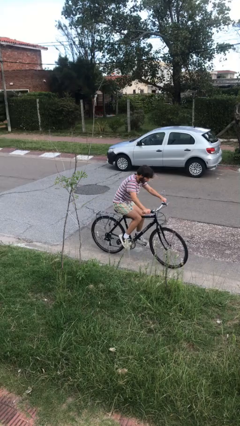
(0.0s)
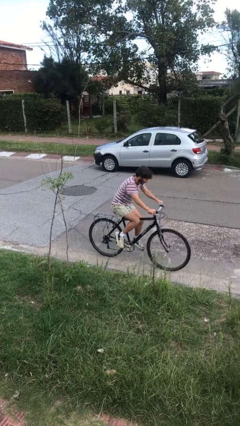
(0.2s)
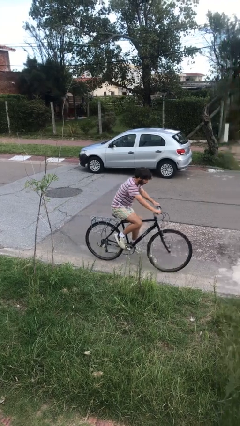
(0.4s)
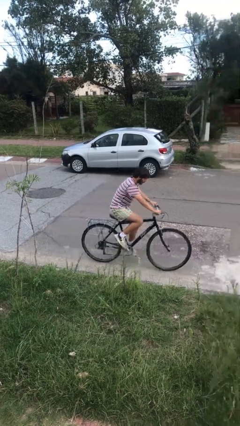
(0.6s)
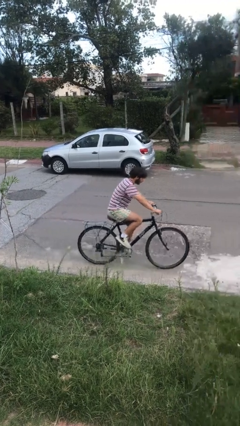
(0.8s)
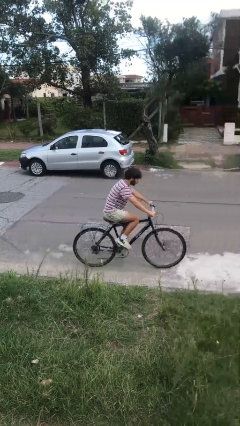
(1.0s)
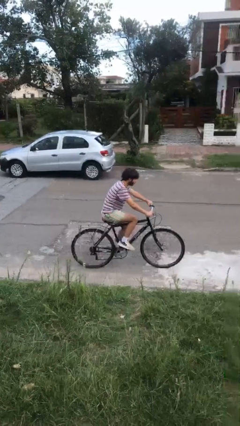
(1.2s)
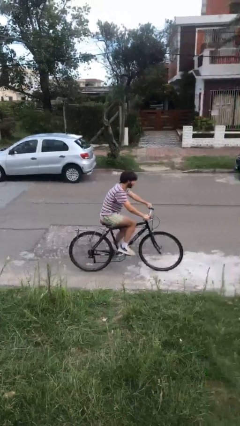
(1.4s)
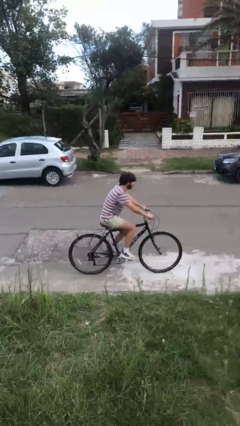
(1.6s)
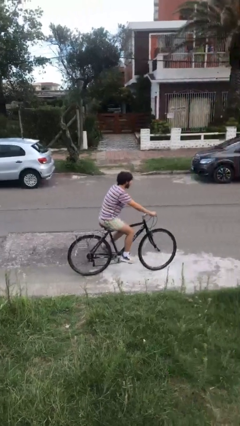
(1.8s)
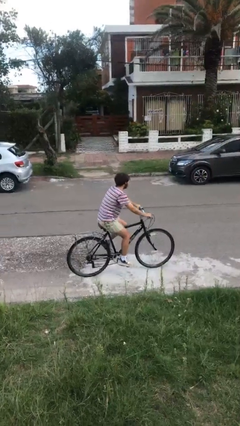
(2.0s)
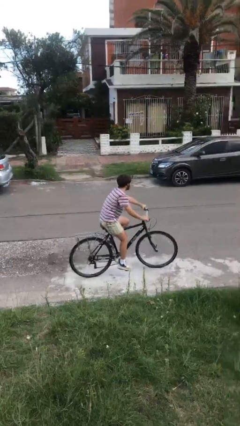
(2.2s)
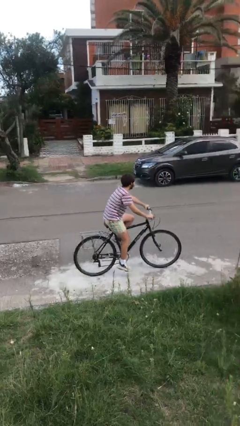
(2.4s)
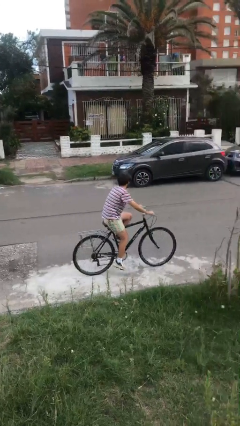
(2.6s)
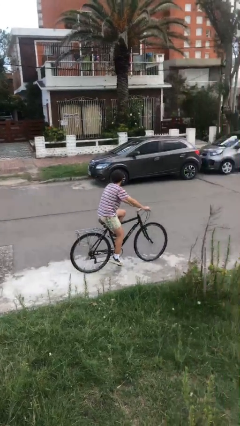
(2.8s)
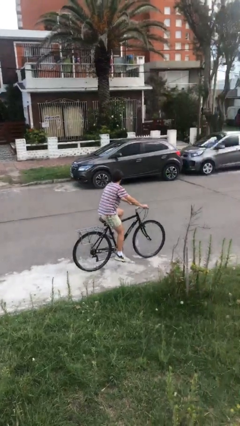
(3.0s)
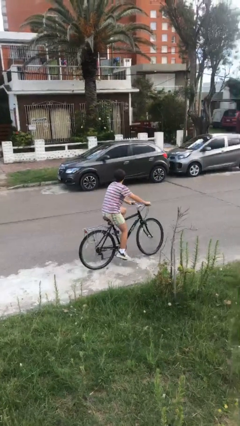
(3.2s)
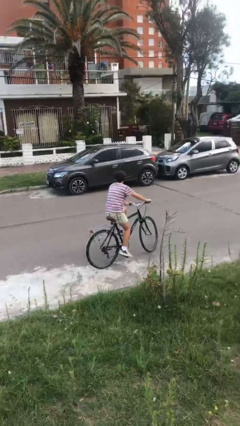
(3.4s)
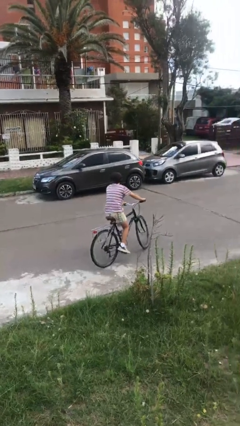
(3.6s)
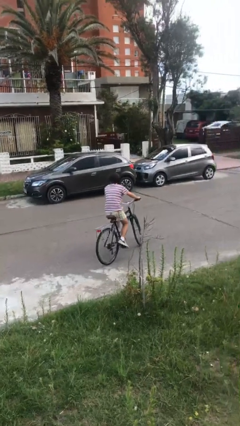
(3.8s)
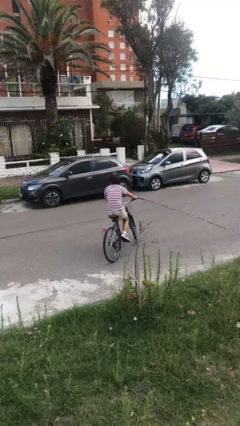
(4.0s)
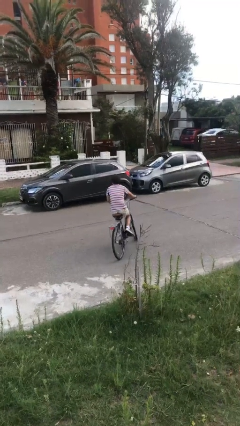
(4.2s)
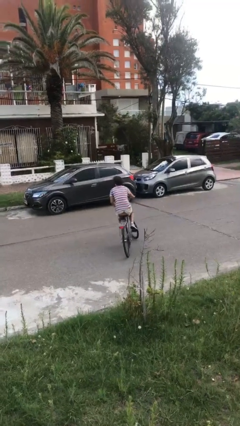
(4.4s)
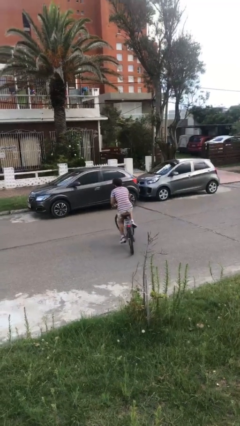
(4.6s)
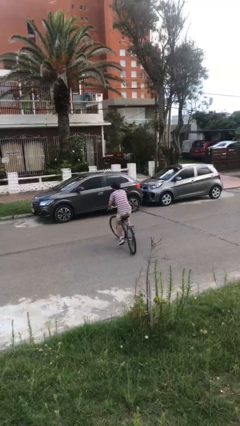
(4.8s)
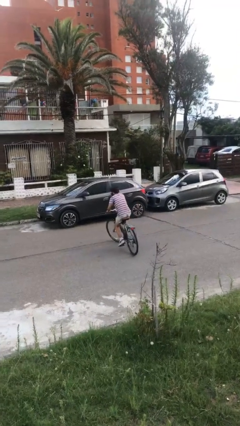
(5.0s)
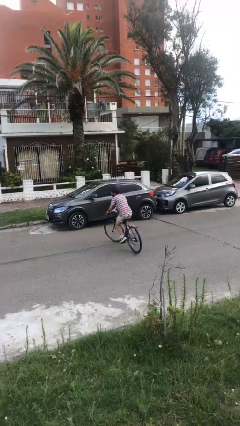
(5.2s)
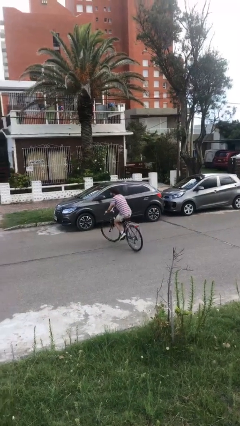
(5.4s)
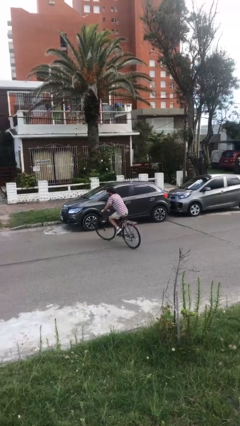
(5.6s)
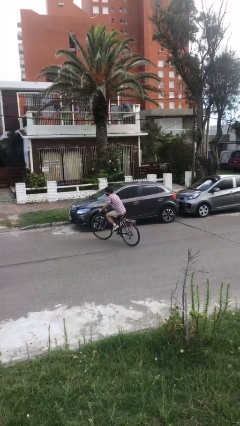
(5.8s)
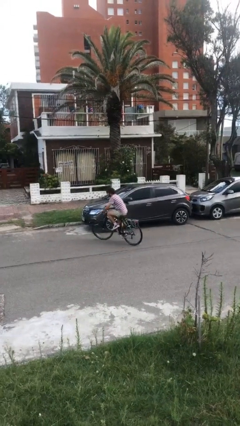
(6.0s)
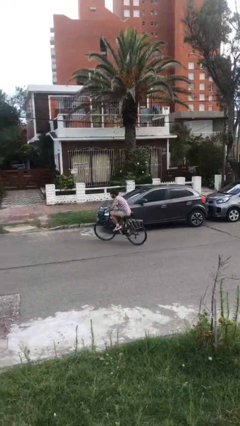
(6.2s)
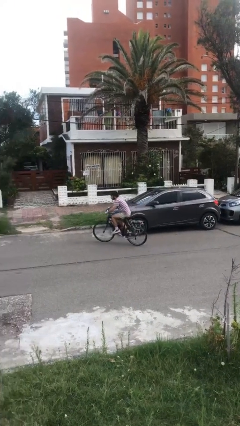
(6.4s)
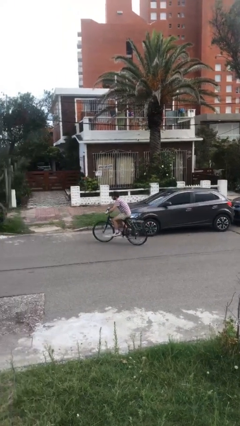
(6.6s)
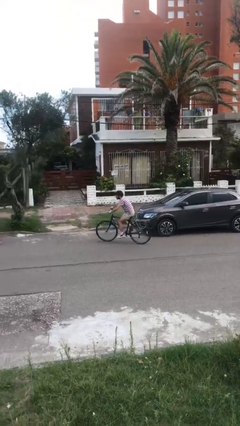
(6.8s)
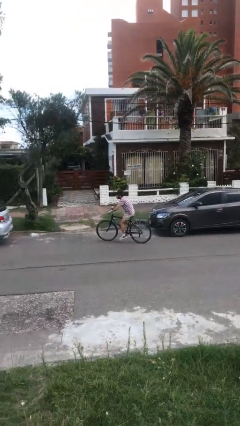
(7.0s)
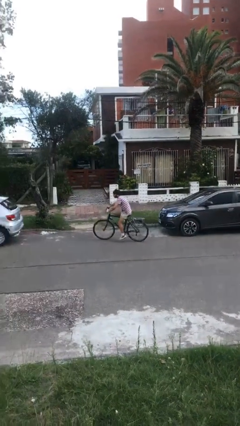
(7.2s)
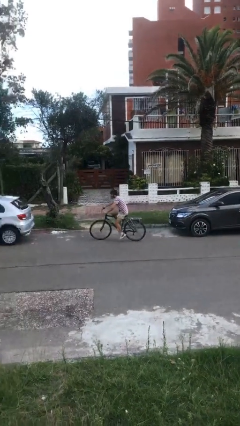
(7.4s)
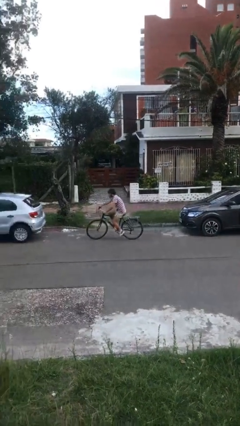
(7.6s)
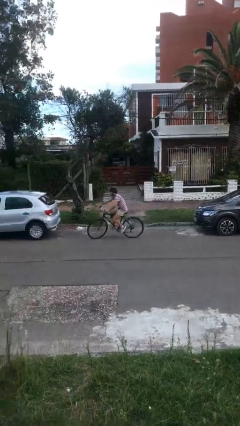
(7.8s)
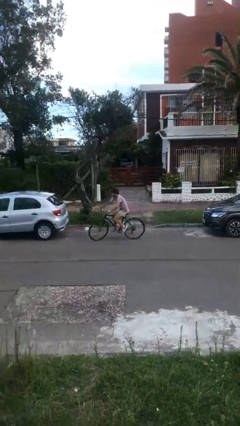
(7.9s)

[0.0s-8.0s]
person rides bicycle

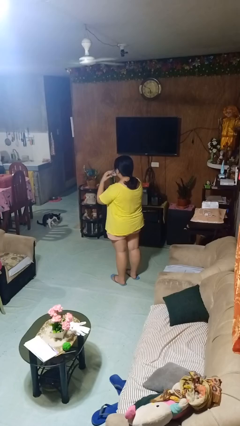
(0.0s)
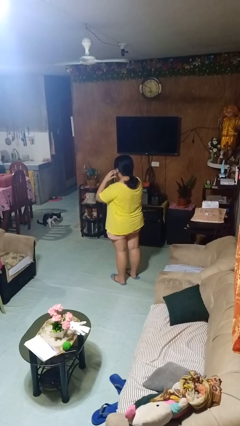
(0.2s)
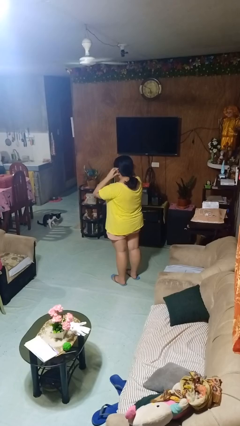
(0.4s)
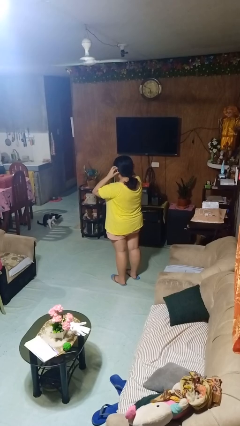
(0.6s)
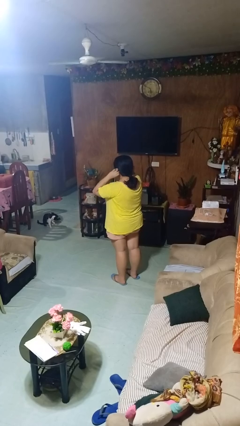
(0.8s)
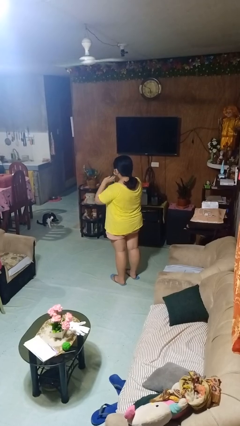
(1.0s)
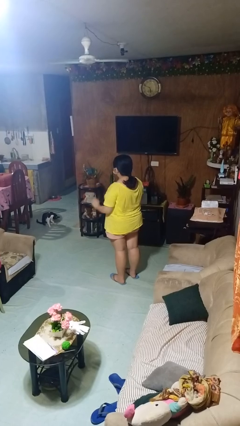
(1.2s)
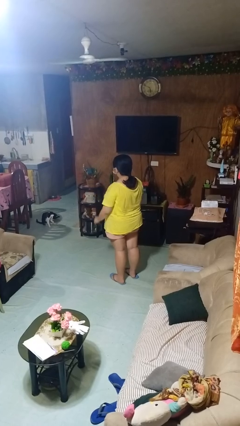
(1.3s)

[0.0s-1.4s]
person puts on facemask

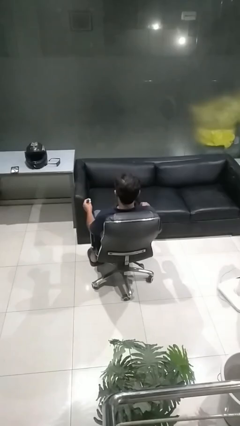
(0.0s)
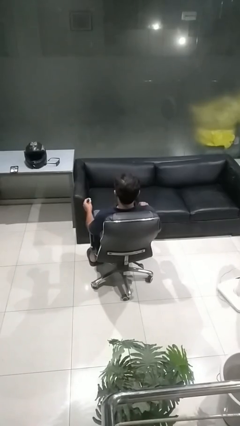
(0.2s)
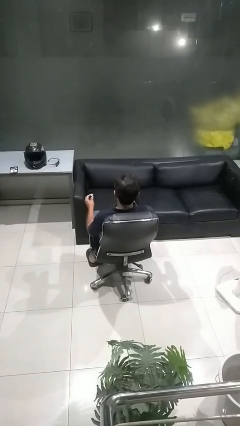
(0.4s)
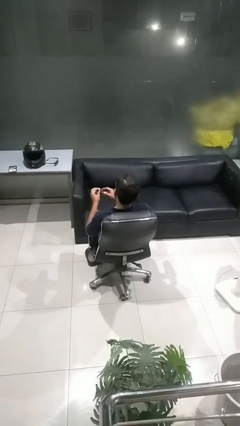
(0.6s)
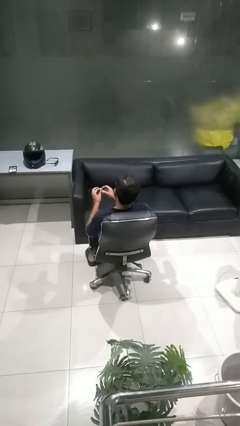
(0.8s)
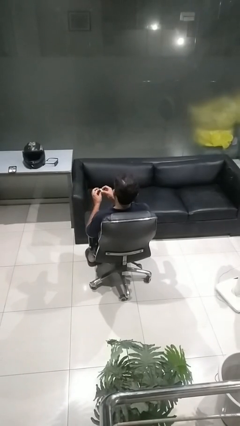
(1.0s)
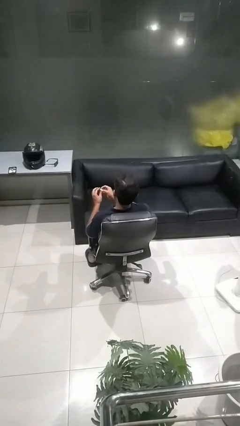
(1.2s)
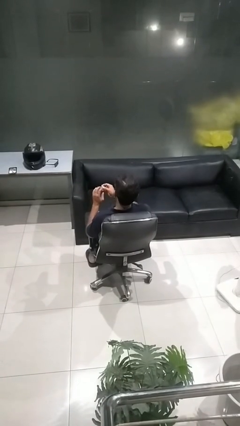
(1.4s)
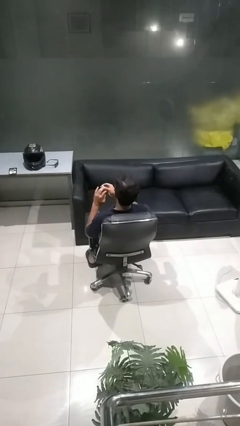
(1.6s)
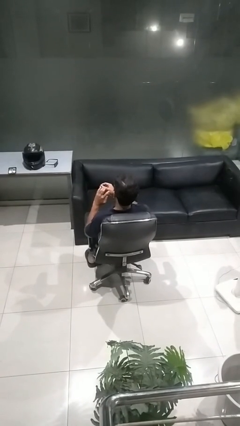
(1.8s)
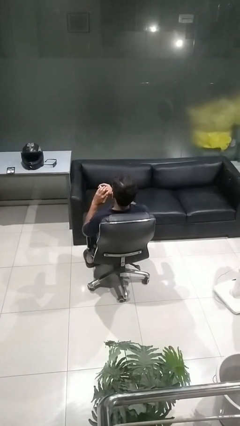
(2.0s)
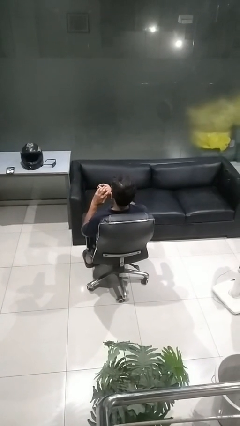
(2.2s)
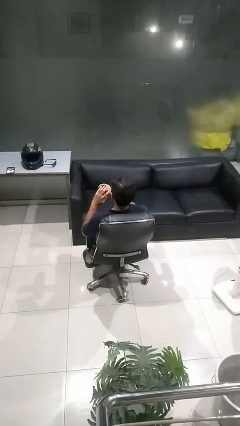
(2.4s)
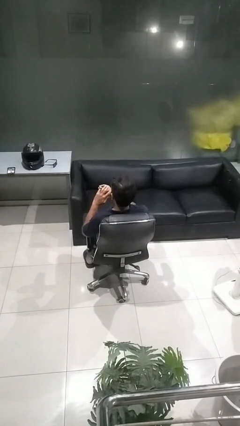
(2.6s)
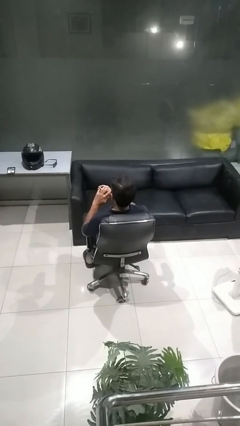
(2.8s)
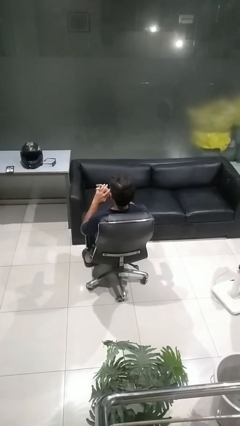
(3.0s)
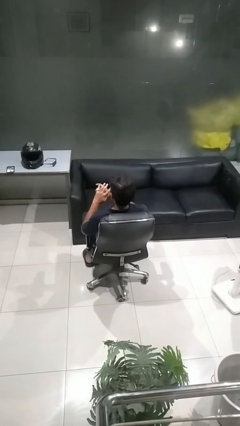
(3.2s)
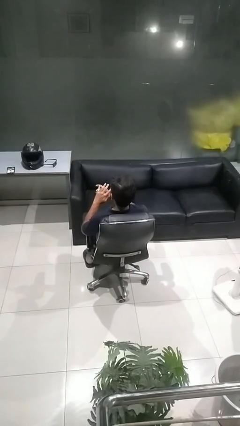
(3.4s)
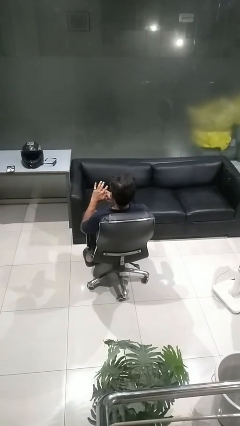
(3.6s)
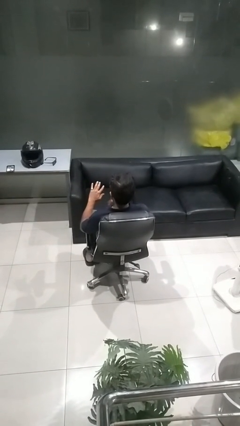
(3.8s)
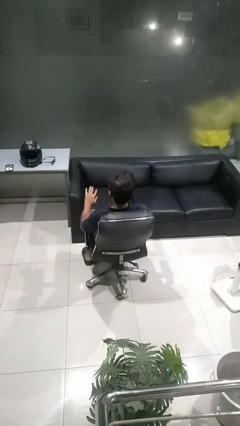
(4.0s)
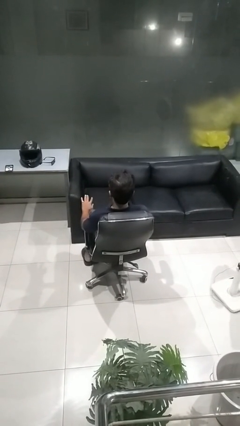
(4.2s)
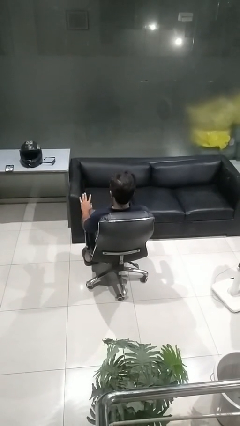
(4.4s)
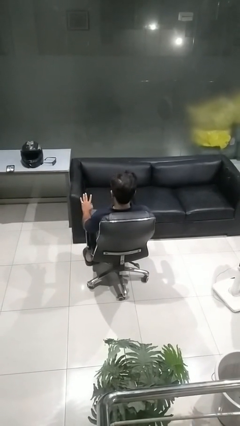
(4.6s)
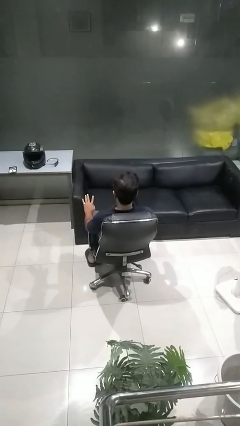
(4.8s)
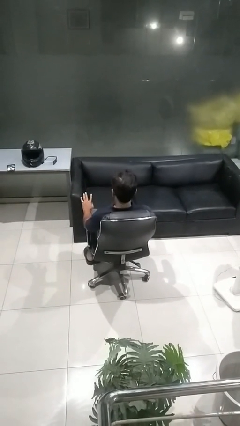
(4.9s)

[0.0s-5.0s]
person puts on ring

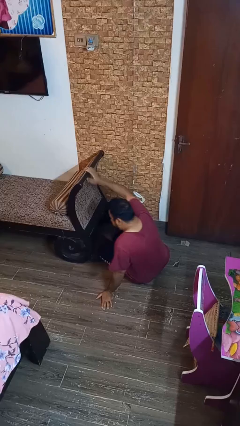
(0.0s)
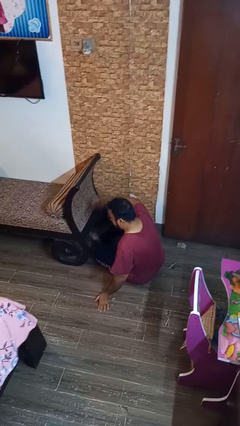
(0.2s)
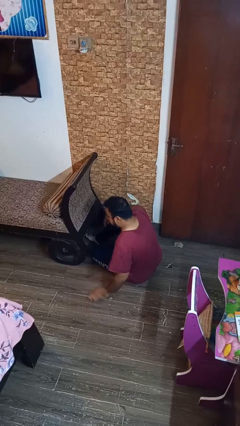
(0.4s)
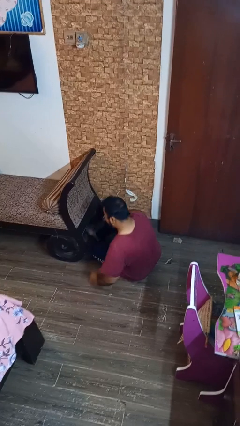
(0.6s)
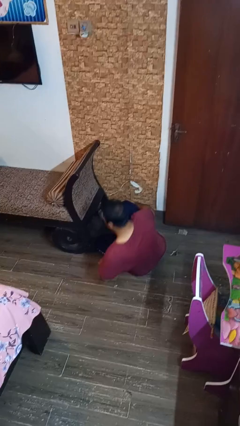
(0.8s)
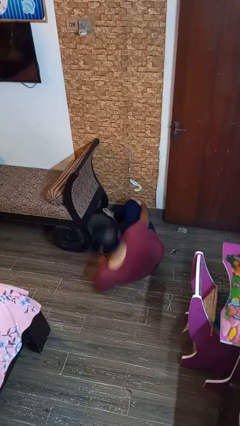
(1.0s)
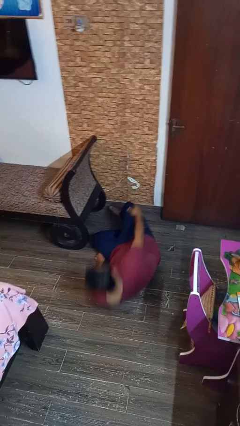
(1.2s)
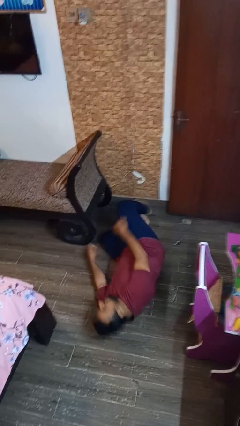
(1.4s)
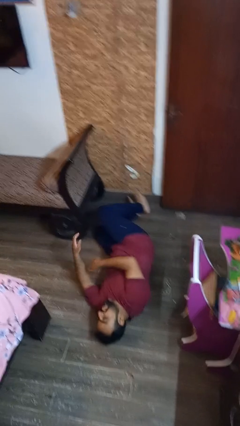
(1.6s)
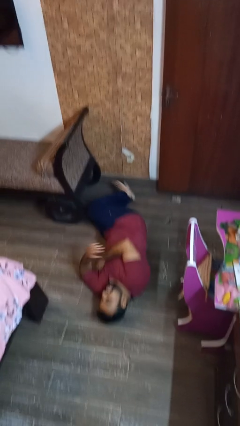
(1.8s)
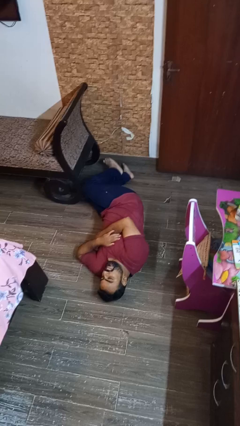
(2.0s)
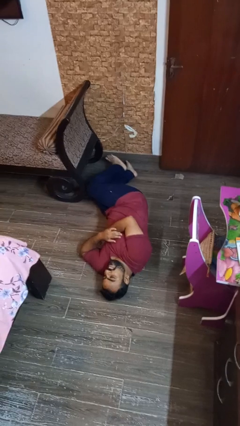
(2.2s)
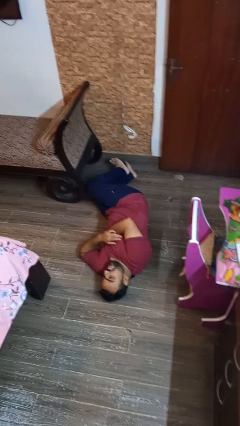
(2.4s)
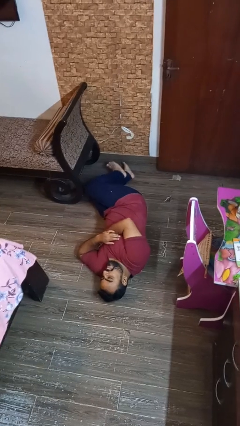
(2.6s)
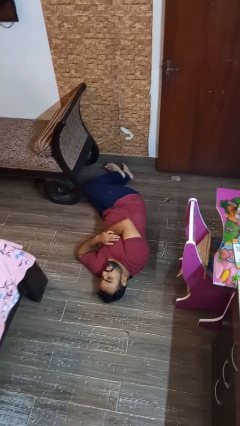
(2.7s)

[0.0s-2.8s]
person lies down on floor

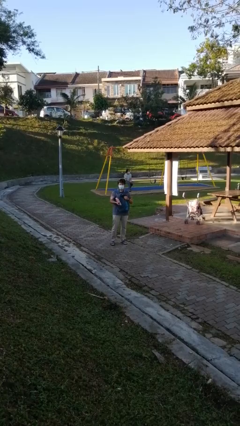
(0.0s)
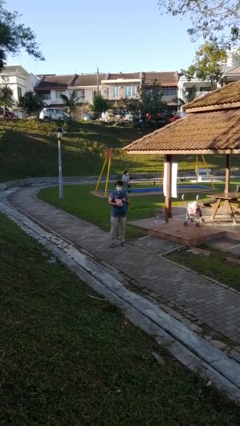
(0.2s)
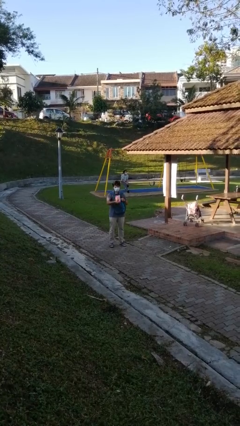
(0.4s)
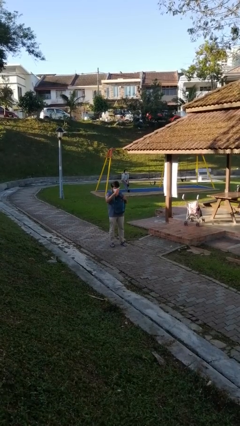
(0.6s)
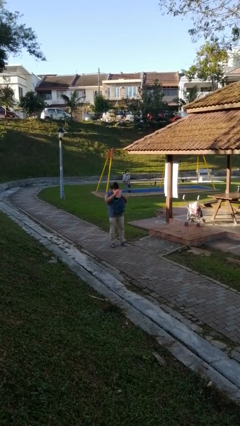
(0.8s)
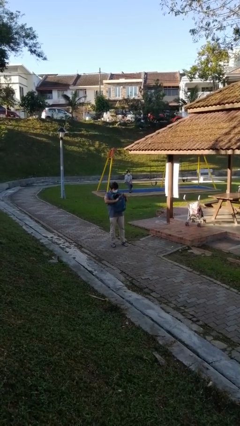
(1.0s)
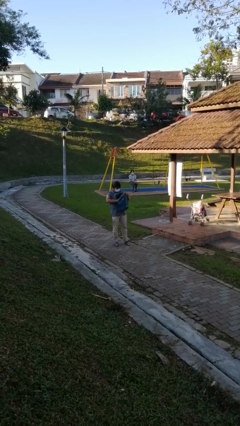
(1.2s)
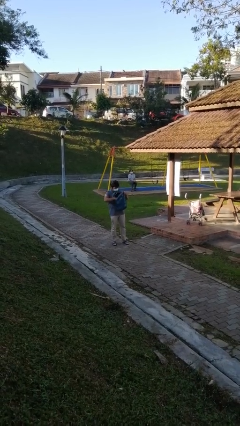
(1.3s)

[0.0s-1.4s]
person puts object into backpack
